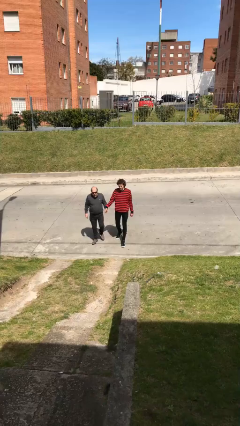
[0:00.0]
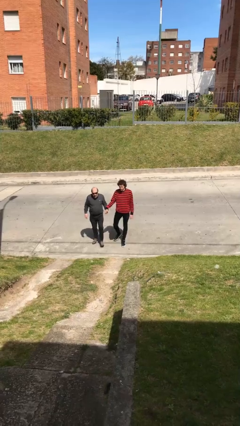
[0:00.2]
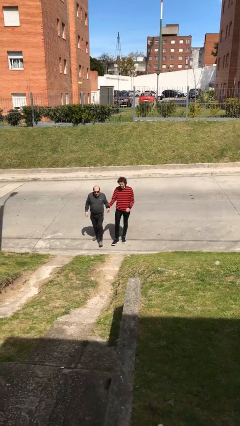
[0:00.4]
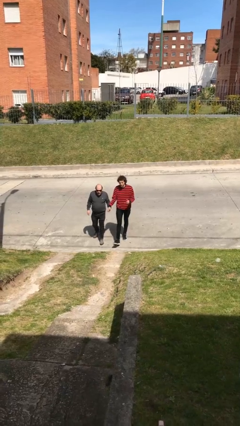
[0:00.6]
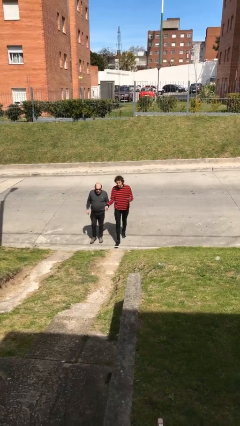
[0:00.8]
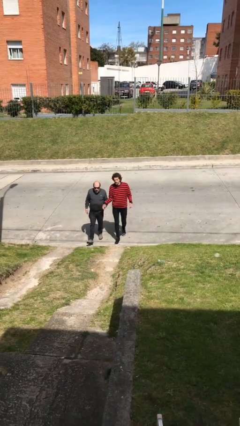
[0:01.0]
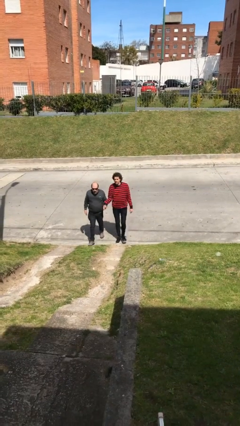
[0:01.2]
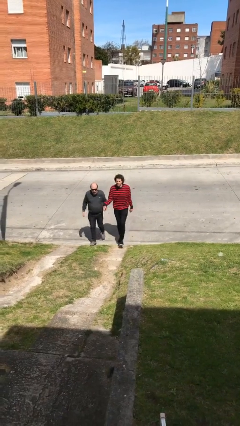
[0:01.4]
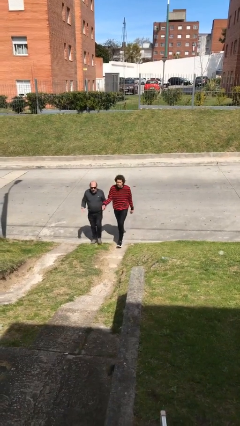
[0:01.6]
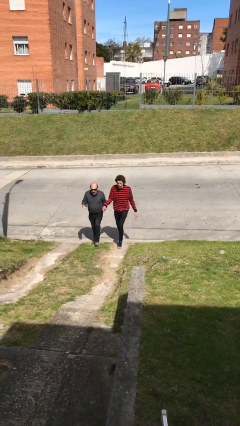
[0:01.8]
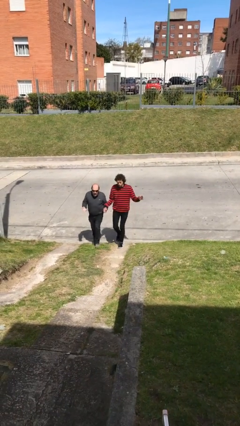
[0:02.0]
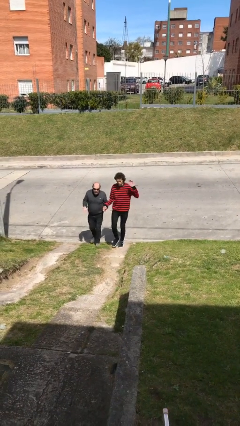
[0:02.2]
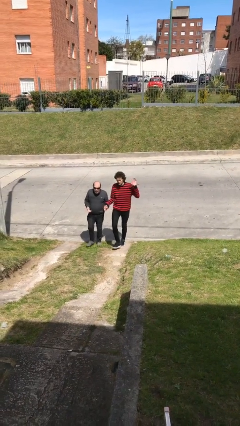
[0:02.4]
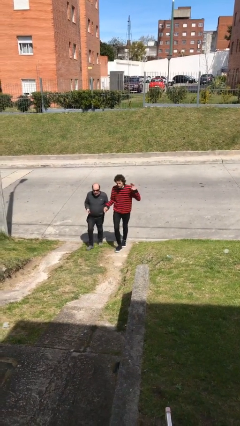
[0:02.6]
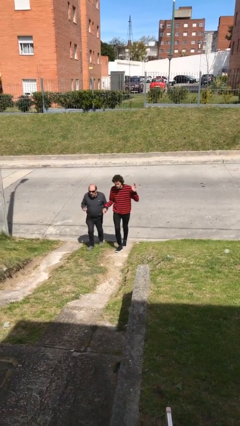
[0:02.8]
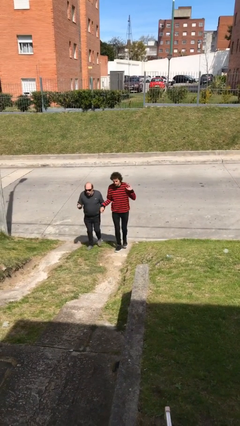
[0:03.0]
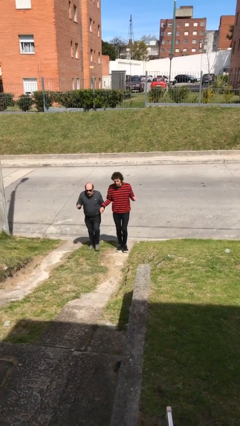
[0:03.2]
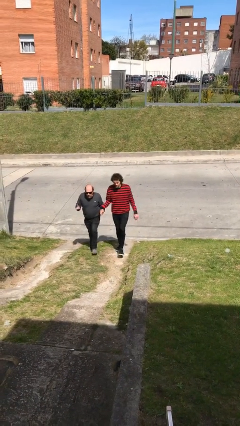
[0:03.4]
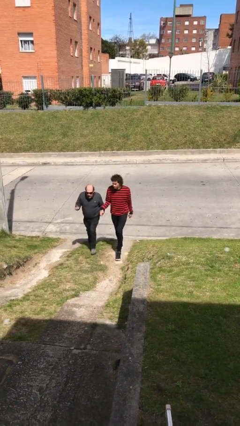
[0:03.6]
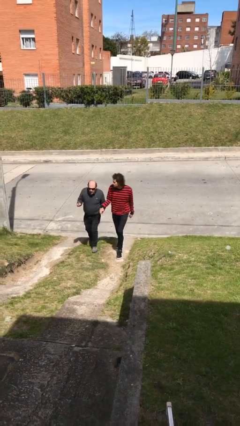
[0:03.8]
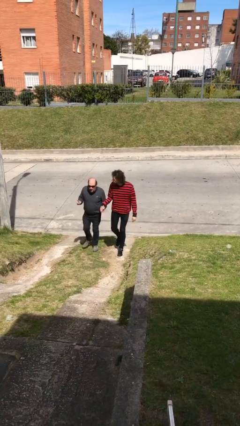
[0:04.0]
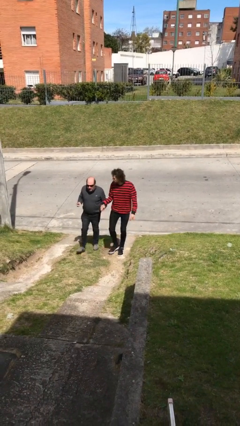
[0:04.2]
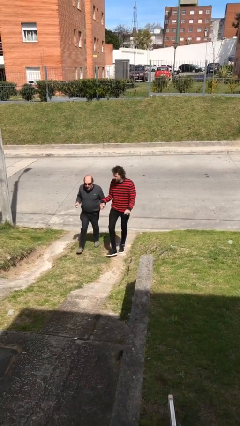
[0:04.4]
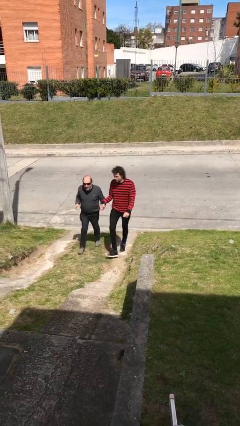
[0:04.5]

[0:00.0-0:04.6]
person holds hand

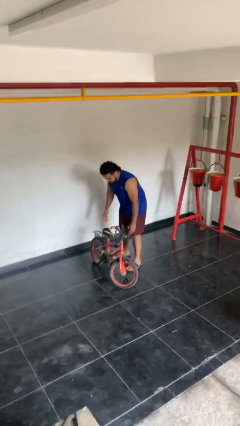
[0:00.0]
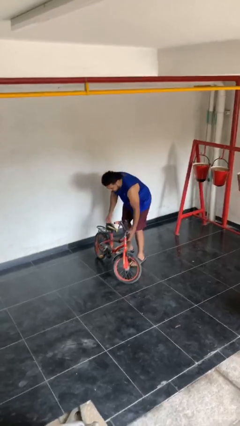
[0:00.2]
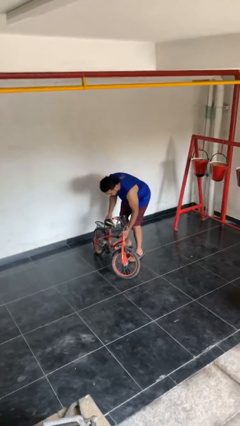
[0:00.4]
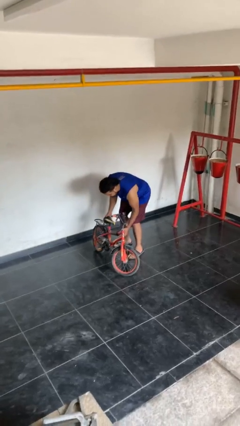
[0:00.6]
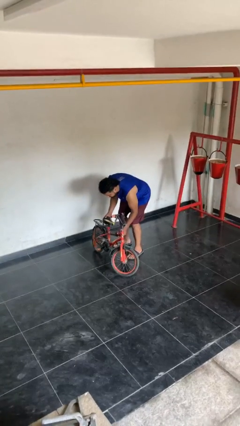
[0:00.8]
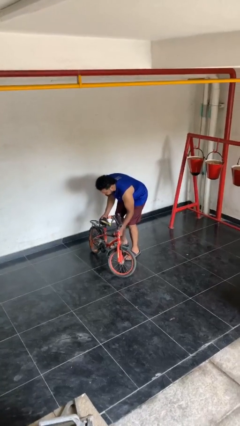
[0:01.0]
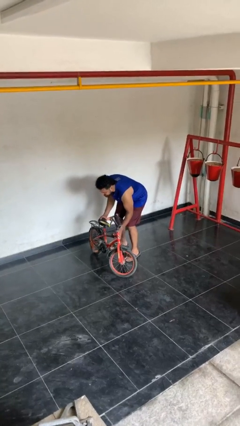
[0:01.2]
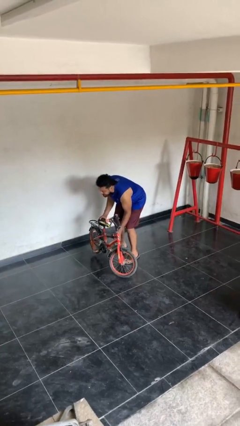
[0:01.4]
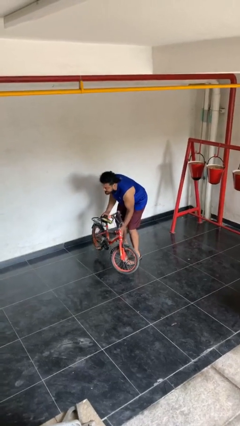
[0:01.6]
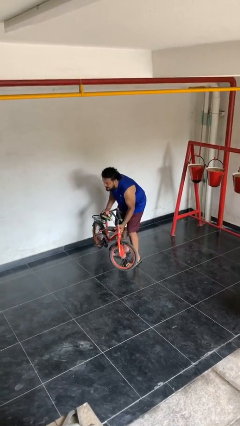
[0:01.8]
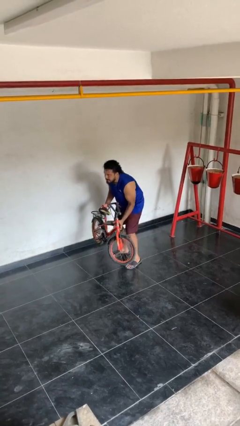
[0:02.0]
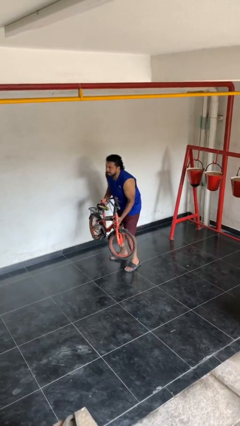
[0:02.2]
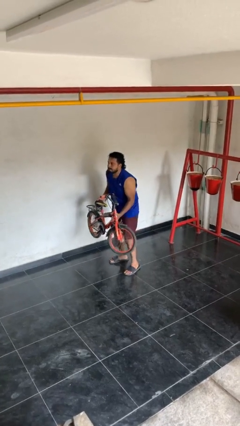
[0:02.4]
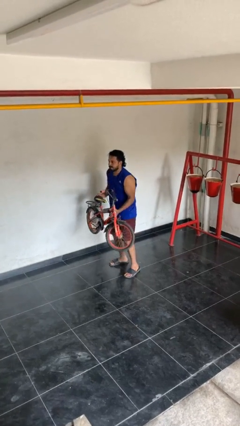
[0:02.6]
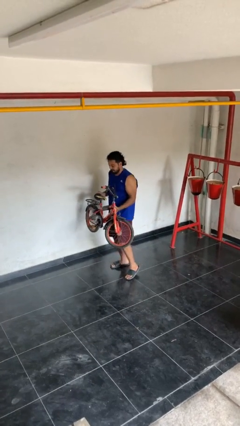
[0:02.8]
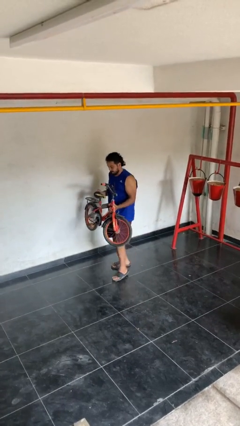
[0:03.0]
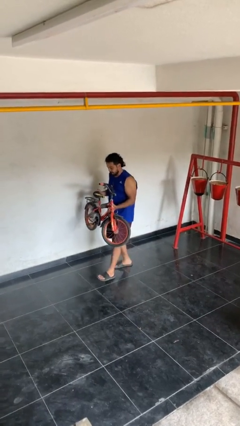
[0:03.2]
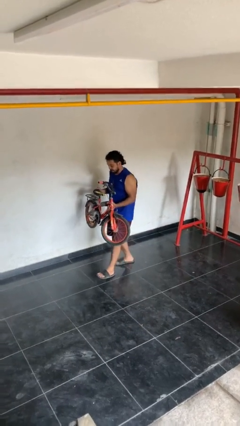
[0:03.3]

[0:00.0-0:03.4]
person picks up object from floor

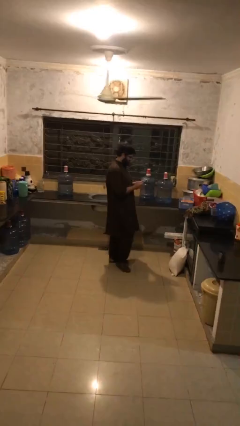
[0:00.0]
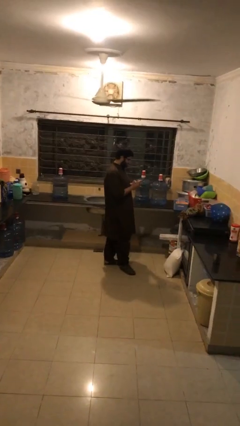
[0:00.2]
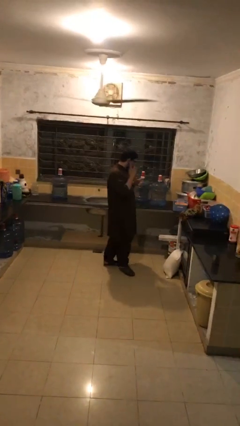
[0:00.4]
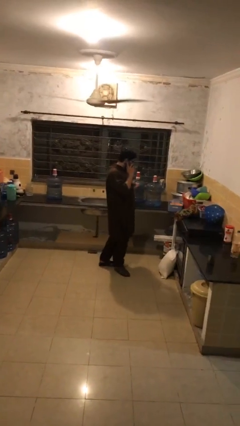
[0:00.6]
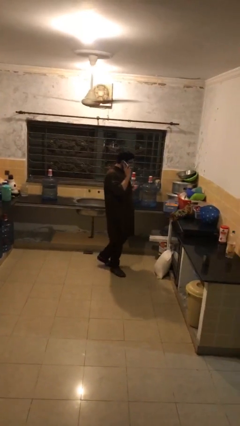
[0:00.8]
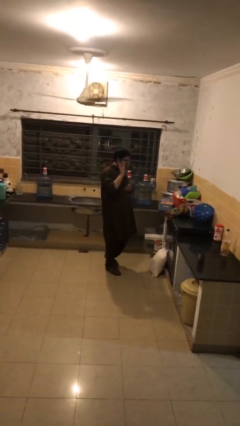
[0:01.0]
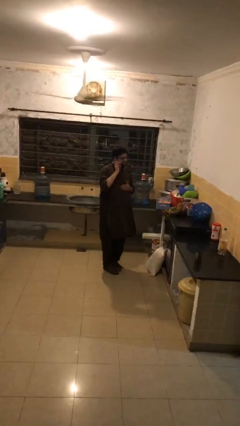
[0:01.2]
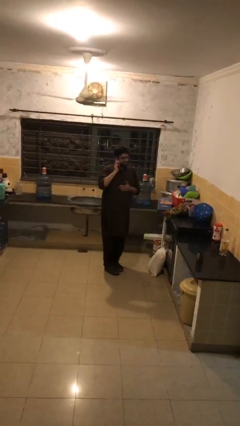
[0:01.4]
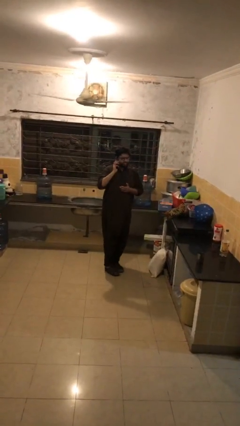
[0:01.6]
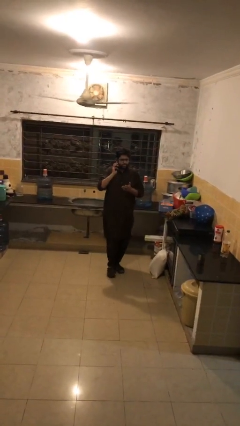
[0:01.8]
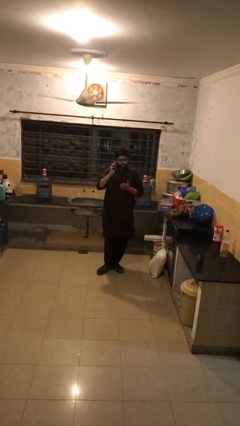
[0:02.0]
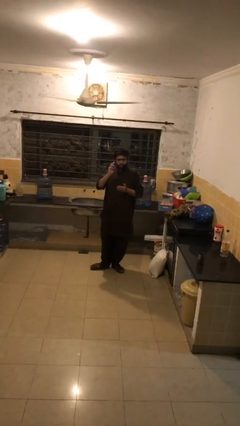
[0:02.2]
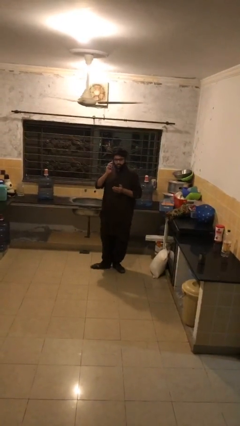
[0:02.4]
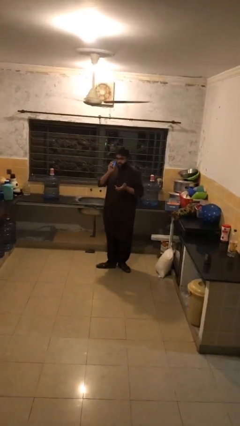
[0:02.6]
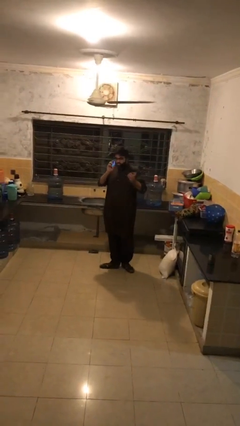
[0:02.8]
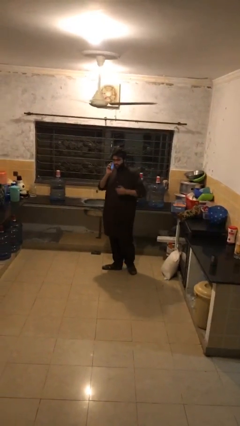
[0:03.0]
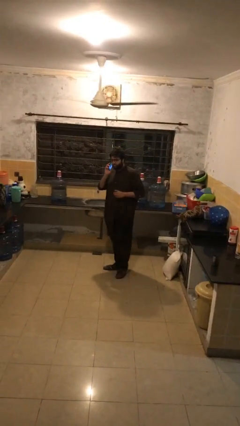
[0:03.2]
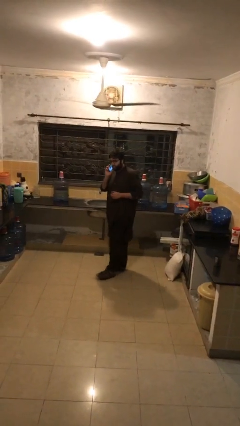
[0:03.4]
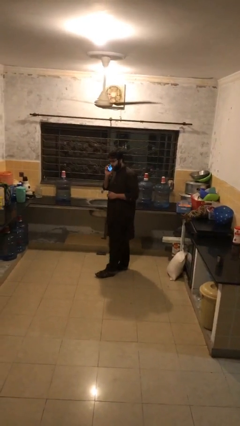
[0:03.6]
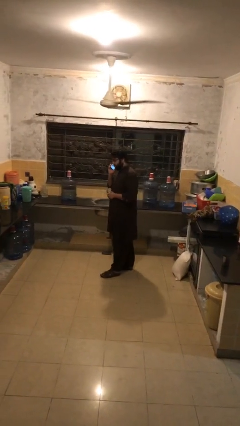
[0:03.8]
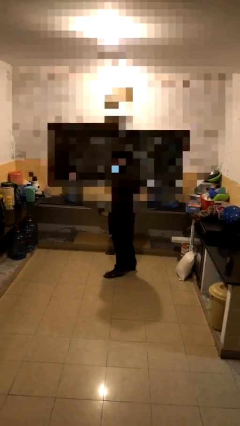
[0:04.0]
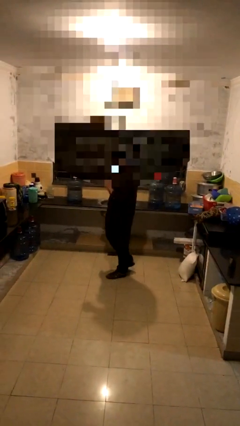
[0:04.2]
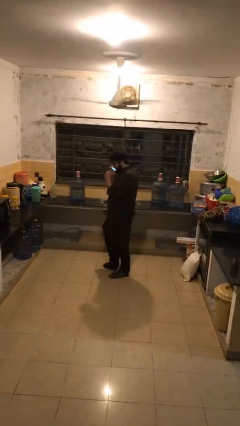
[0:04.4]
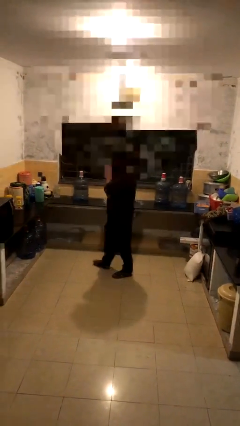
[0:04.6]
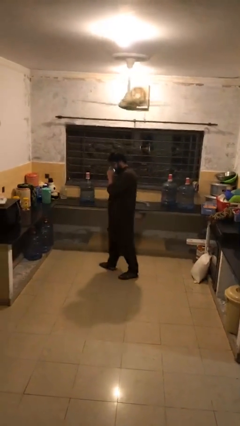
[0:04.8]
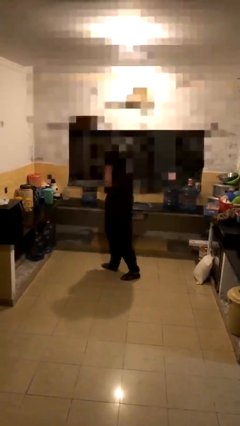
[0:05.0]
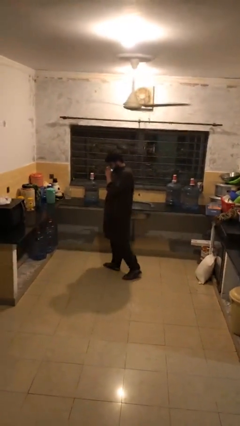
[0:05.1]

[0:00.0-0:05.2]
person talks on phone

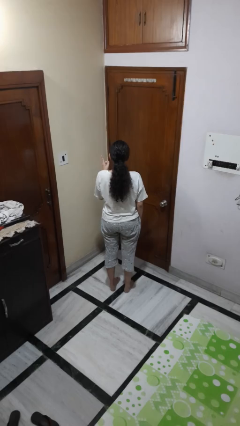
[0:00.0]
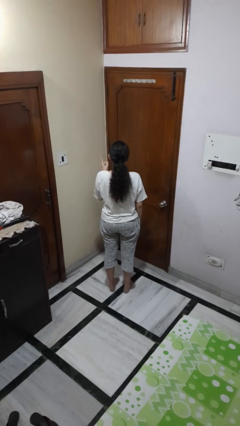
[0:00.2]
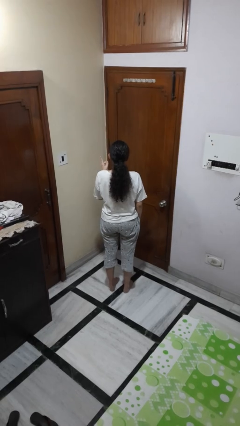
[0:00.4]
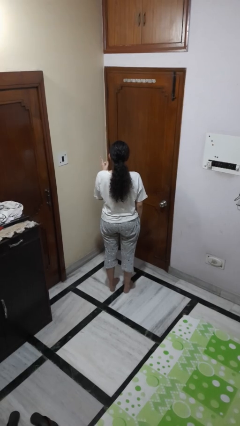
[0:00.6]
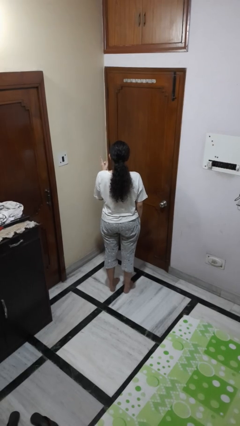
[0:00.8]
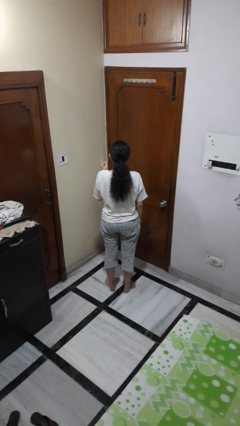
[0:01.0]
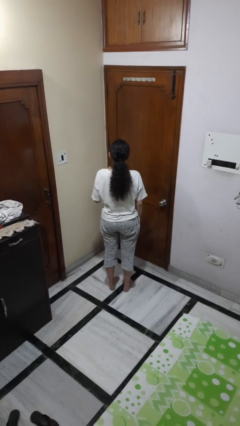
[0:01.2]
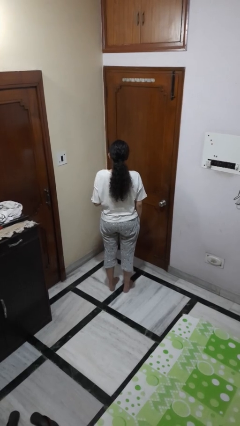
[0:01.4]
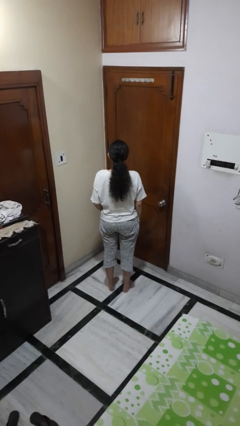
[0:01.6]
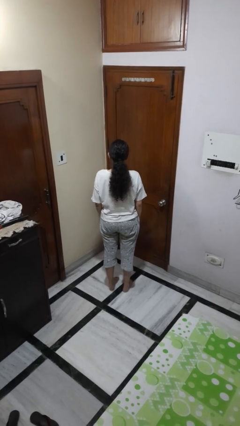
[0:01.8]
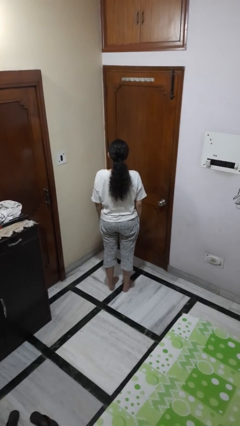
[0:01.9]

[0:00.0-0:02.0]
person gestures number one

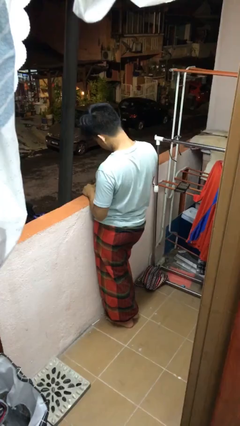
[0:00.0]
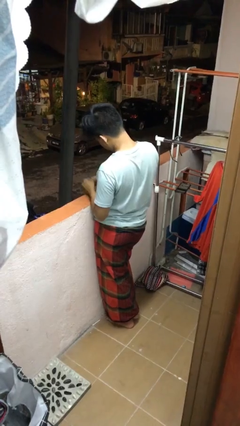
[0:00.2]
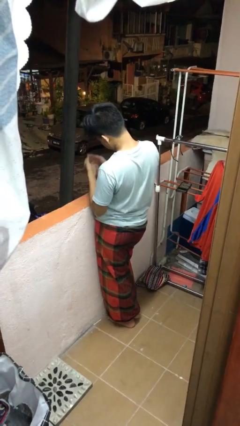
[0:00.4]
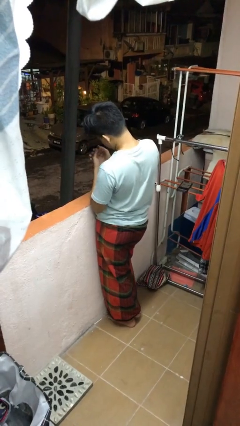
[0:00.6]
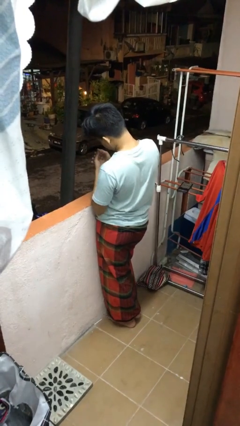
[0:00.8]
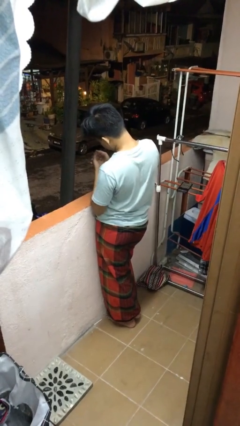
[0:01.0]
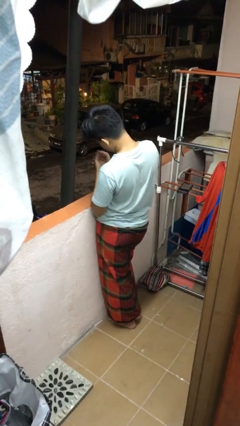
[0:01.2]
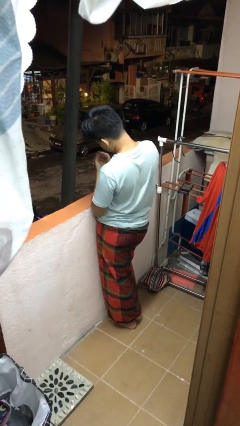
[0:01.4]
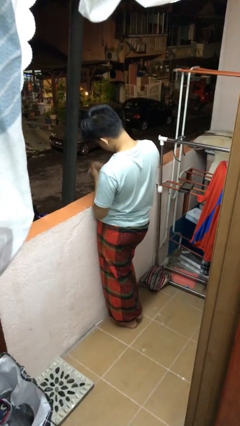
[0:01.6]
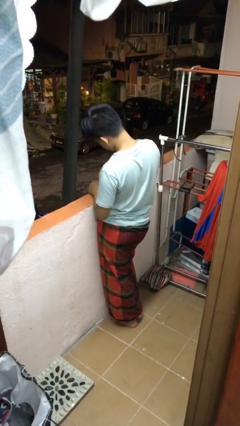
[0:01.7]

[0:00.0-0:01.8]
person prays

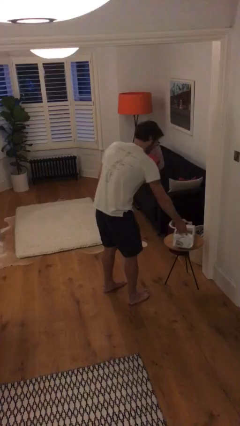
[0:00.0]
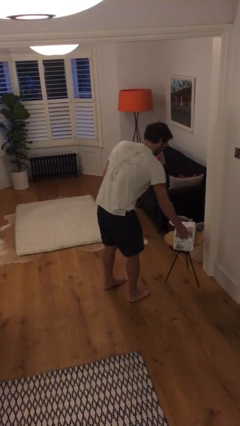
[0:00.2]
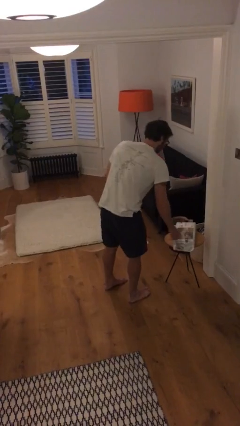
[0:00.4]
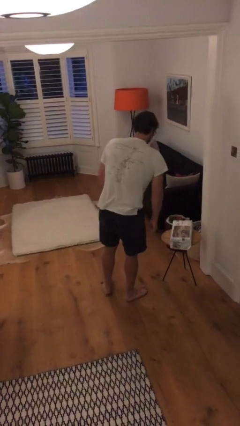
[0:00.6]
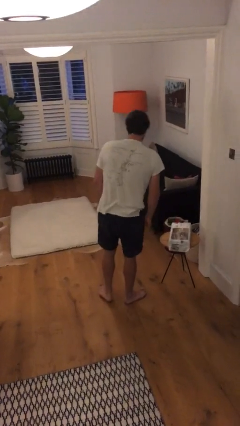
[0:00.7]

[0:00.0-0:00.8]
person puts down object on table
